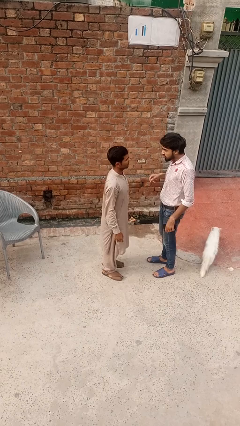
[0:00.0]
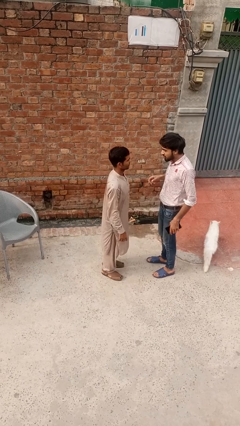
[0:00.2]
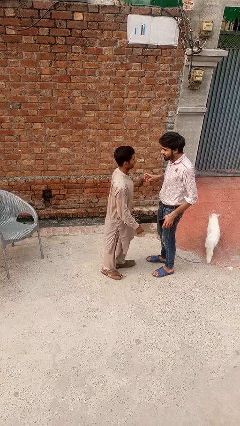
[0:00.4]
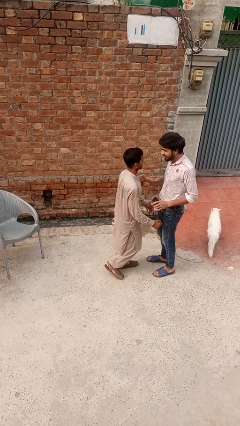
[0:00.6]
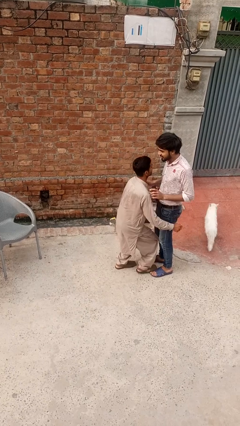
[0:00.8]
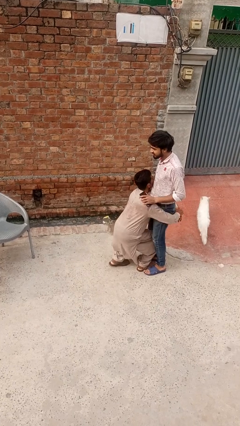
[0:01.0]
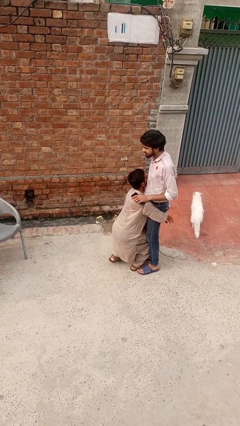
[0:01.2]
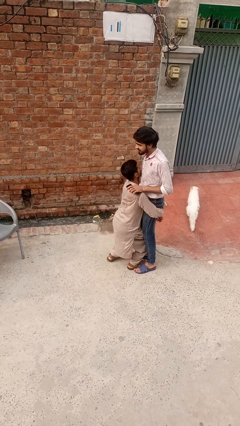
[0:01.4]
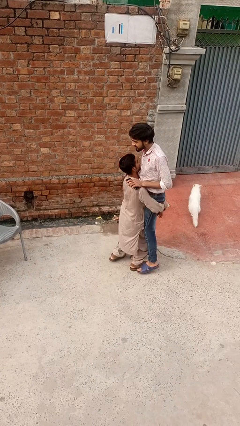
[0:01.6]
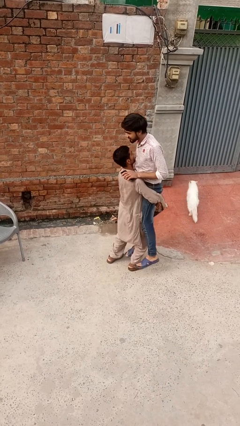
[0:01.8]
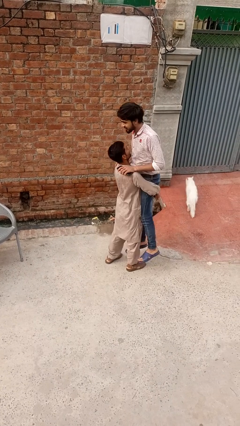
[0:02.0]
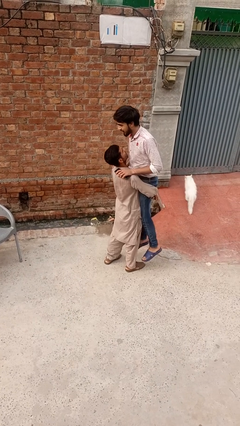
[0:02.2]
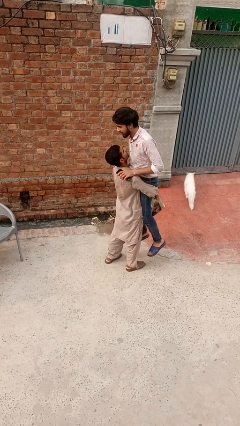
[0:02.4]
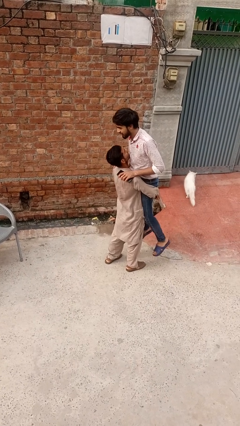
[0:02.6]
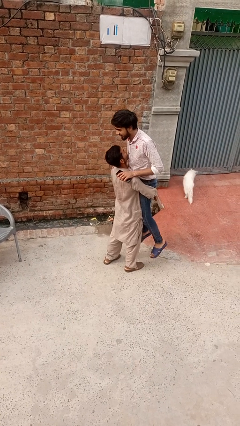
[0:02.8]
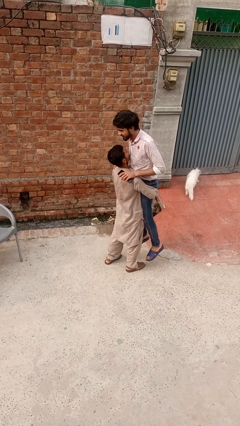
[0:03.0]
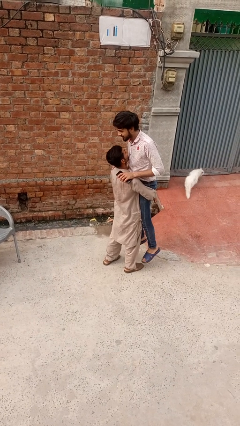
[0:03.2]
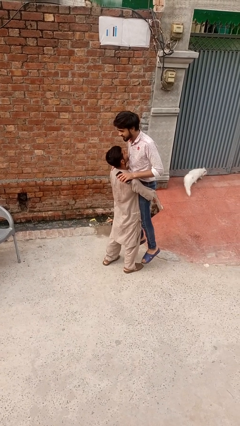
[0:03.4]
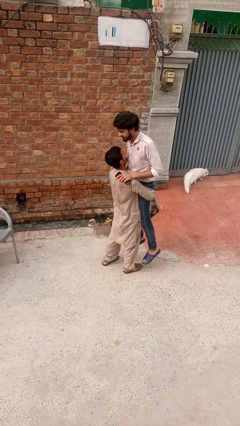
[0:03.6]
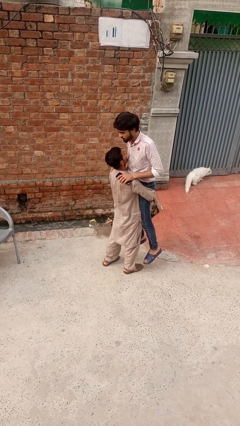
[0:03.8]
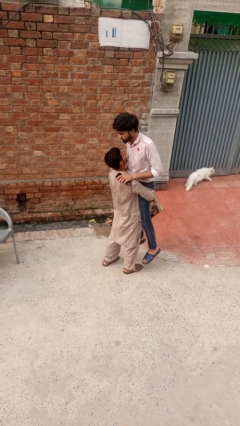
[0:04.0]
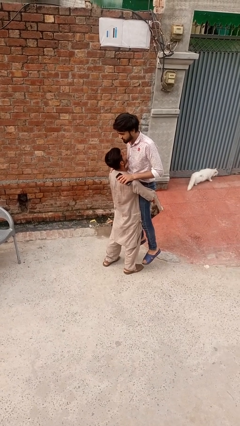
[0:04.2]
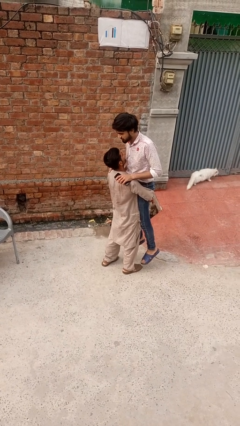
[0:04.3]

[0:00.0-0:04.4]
person picks up person

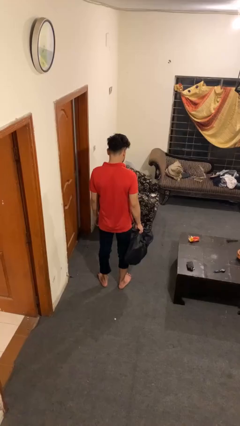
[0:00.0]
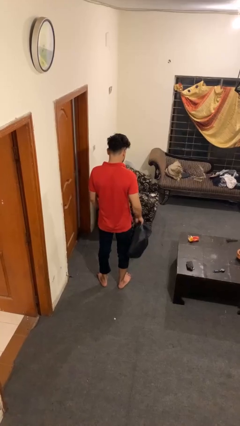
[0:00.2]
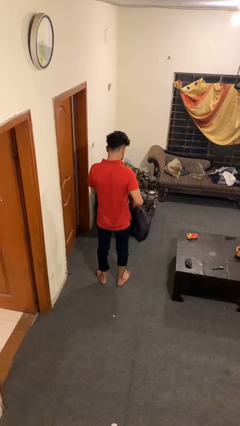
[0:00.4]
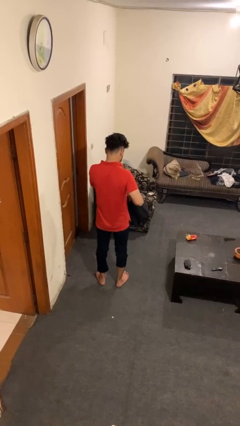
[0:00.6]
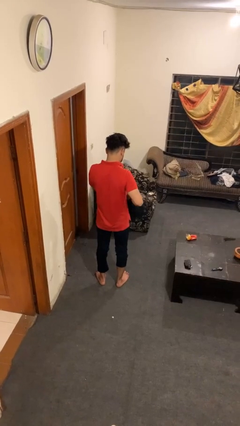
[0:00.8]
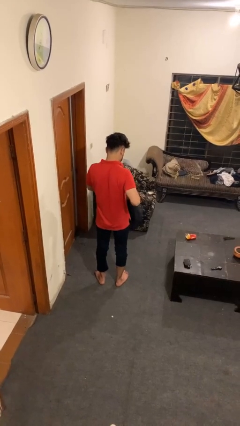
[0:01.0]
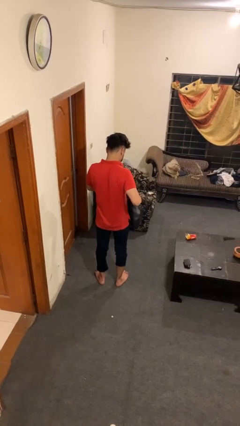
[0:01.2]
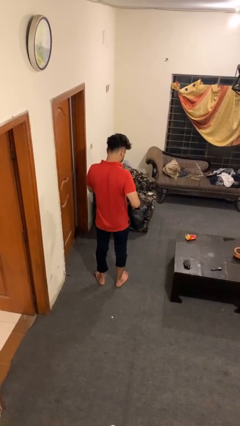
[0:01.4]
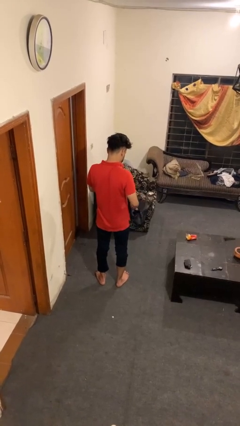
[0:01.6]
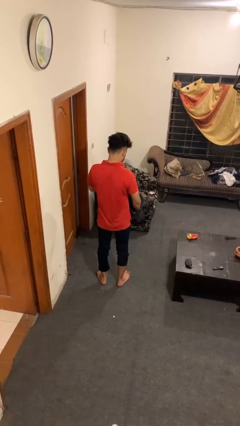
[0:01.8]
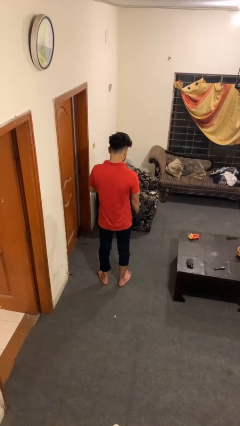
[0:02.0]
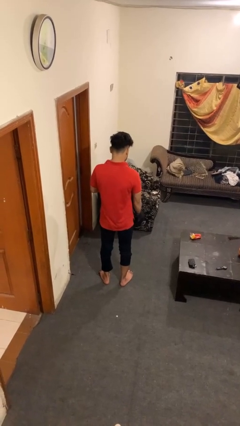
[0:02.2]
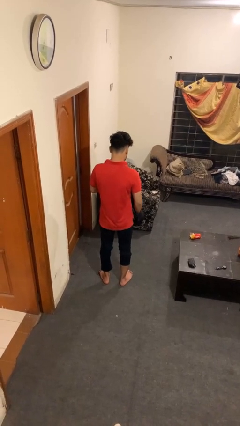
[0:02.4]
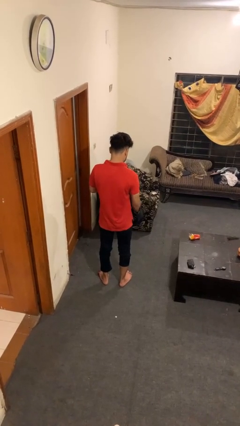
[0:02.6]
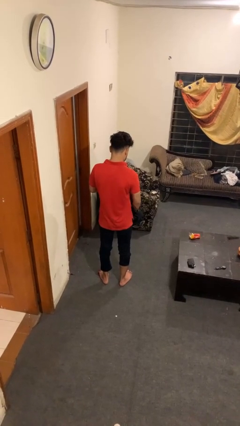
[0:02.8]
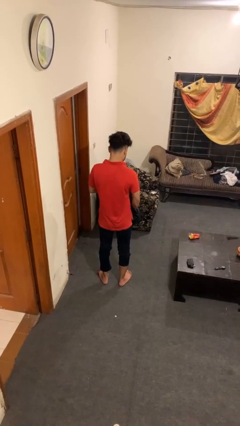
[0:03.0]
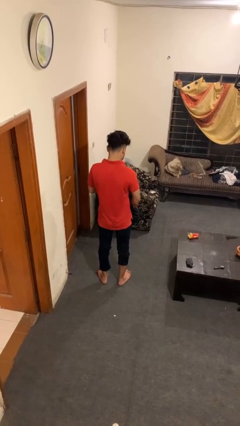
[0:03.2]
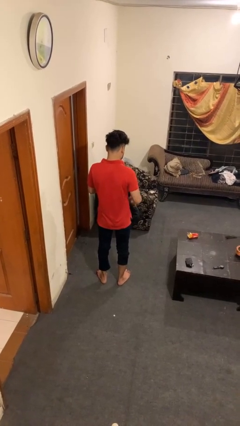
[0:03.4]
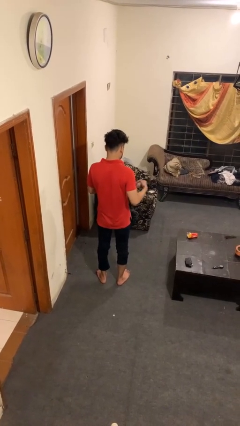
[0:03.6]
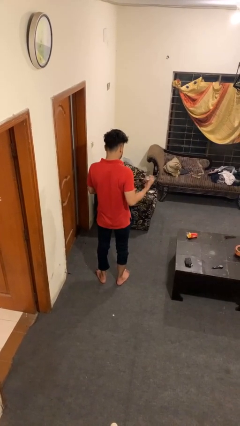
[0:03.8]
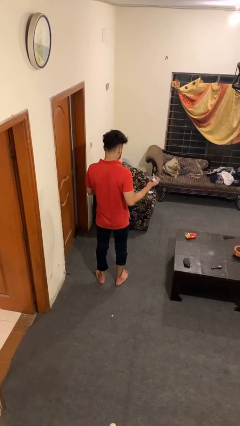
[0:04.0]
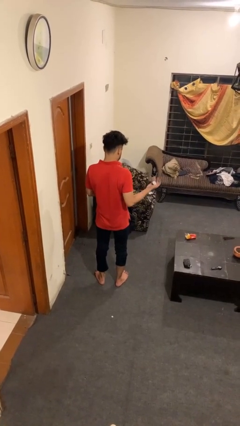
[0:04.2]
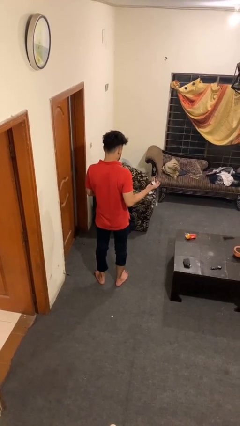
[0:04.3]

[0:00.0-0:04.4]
person takes object from bag

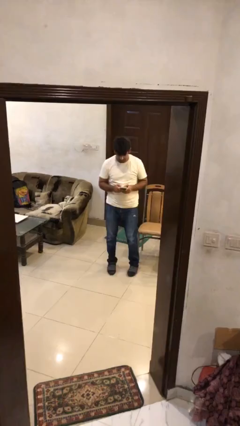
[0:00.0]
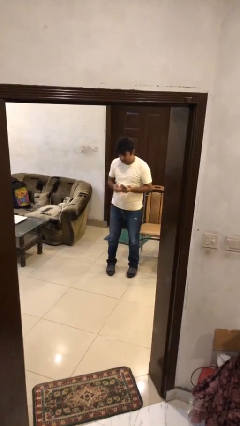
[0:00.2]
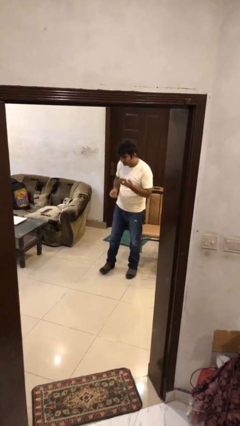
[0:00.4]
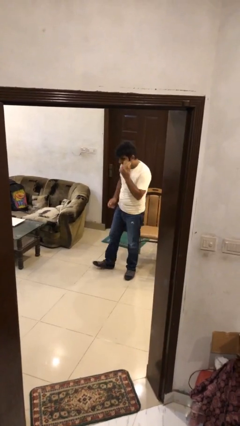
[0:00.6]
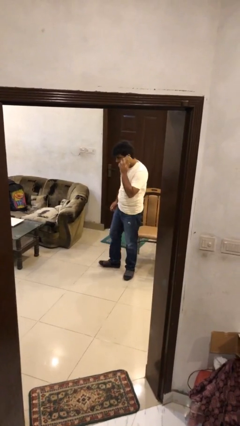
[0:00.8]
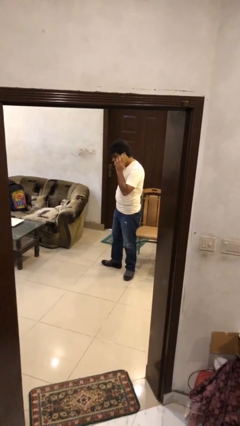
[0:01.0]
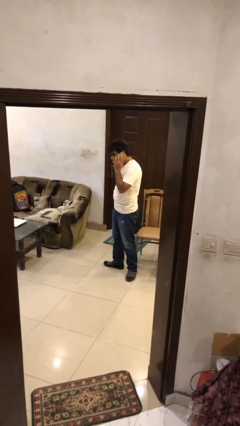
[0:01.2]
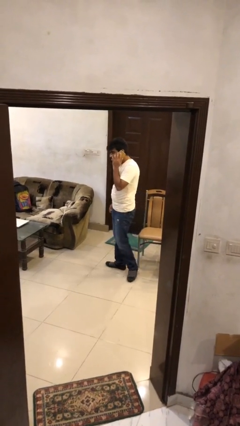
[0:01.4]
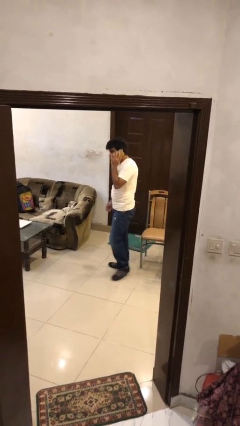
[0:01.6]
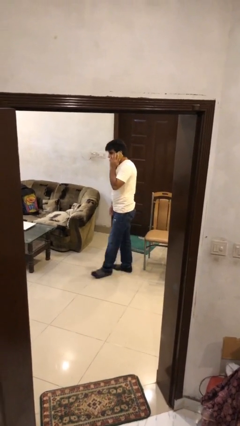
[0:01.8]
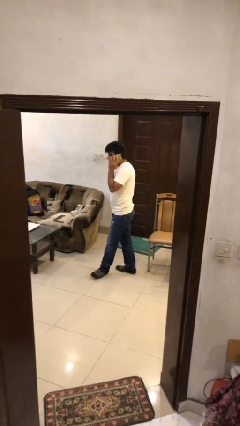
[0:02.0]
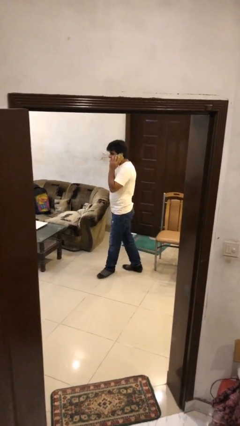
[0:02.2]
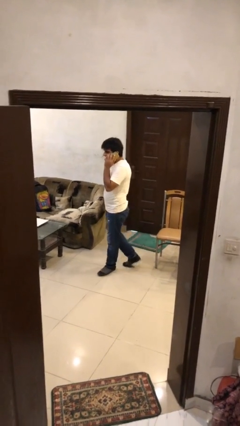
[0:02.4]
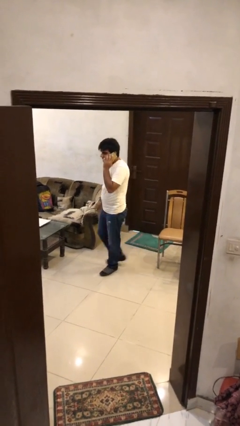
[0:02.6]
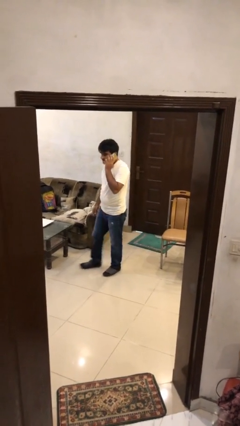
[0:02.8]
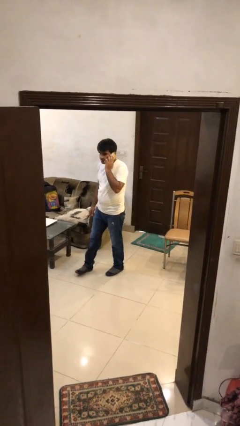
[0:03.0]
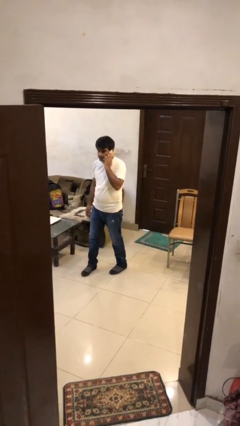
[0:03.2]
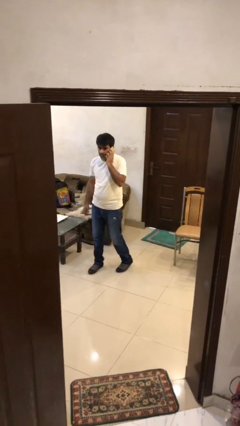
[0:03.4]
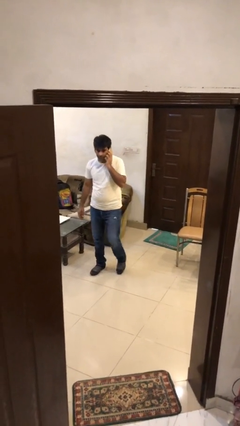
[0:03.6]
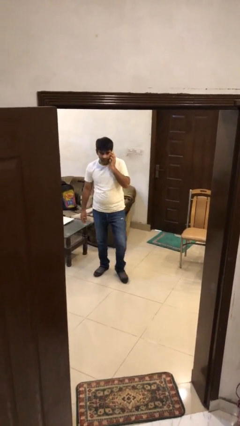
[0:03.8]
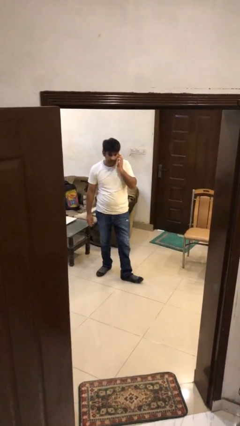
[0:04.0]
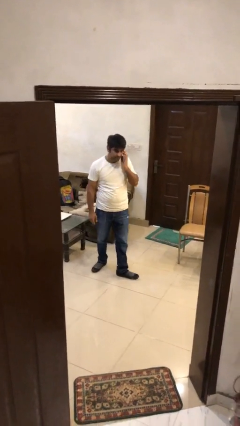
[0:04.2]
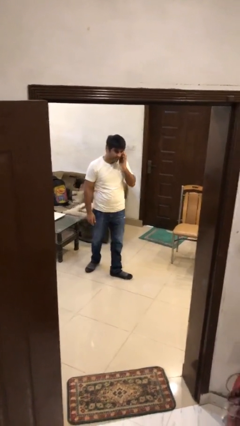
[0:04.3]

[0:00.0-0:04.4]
person talks on phone

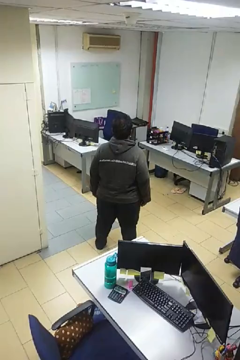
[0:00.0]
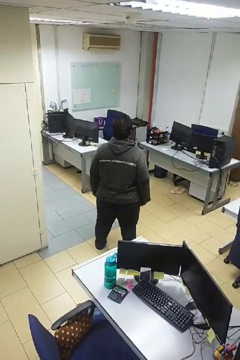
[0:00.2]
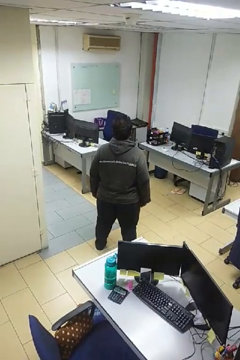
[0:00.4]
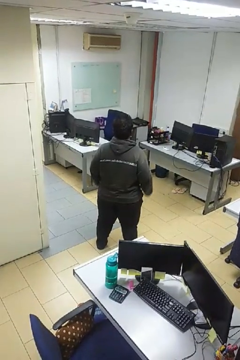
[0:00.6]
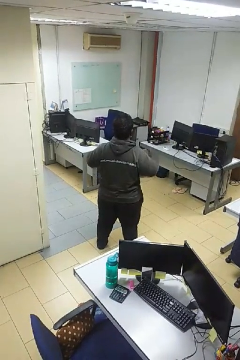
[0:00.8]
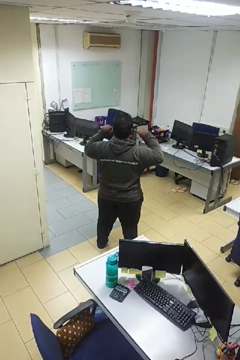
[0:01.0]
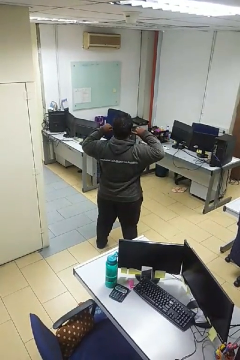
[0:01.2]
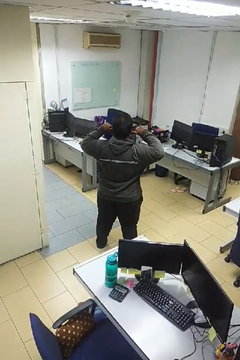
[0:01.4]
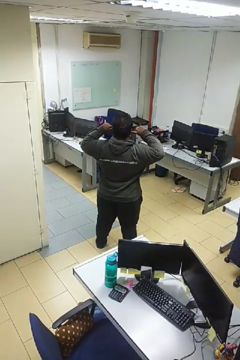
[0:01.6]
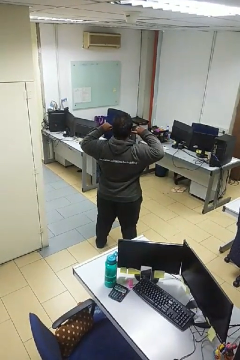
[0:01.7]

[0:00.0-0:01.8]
person puts fingers in ear

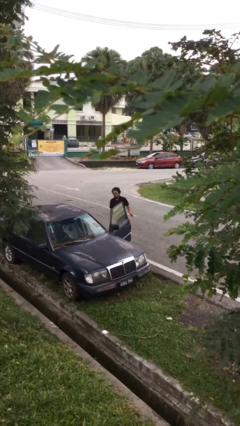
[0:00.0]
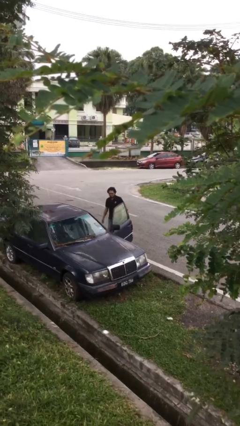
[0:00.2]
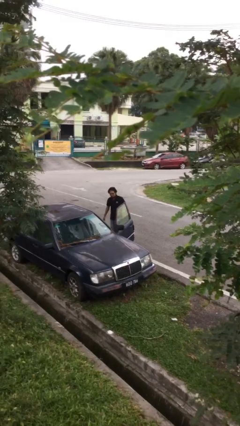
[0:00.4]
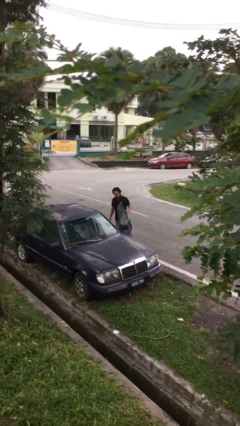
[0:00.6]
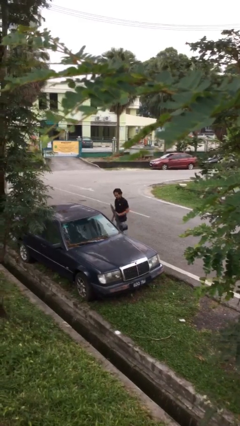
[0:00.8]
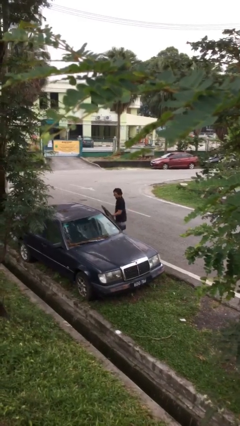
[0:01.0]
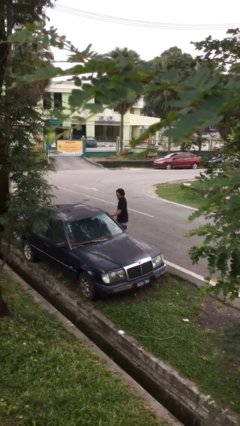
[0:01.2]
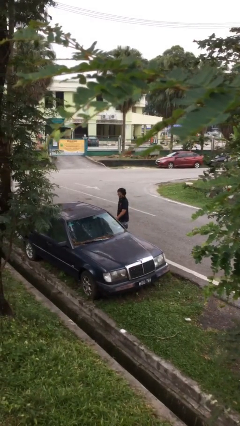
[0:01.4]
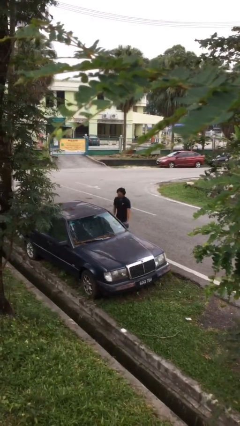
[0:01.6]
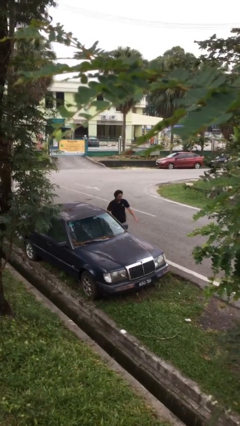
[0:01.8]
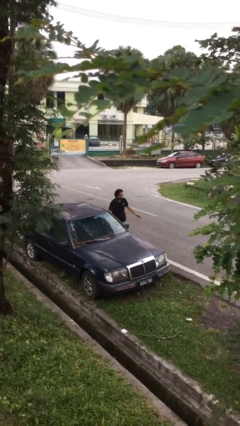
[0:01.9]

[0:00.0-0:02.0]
person closes car door

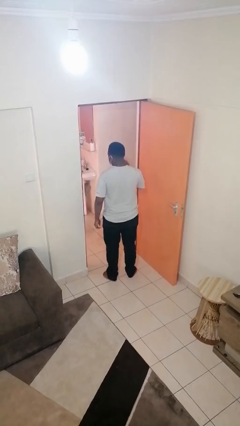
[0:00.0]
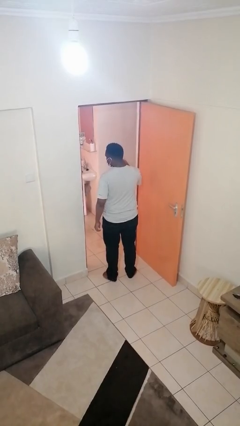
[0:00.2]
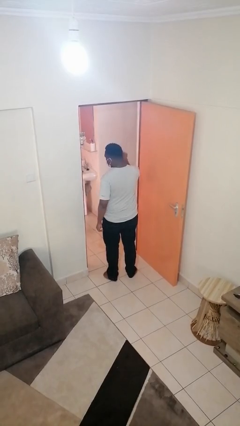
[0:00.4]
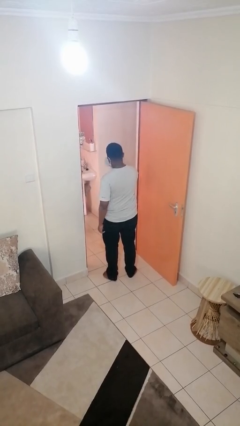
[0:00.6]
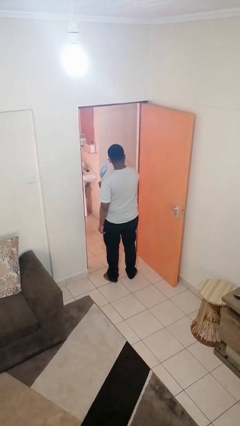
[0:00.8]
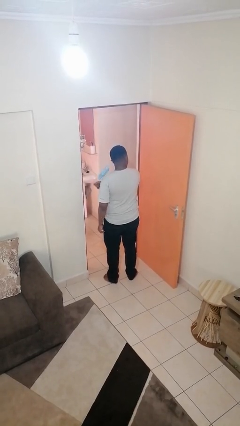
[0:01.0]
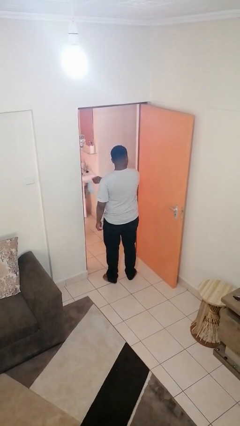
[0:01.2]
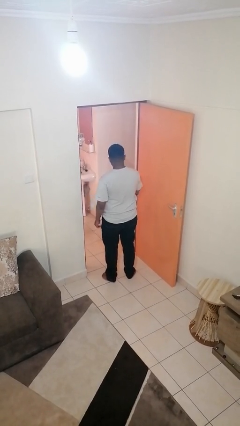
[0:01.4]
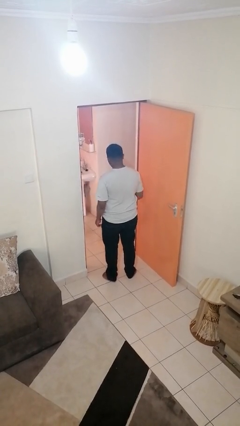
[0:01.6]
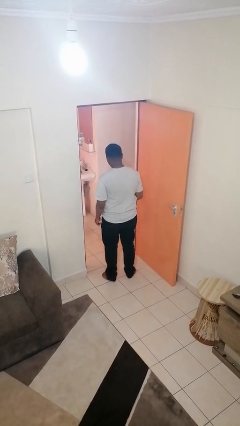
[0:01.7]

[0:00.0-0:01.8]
person takes off facemask